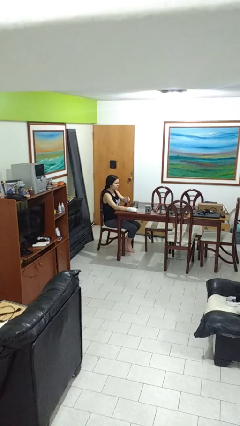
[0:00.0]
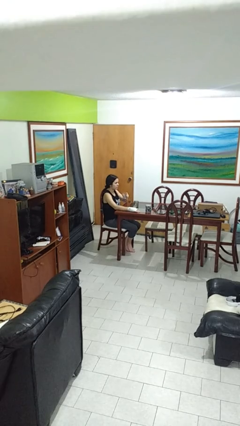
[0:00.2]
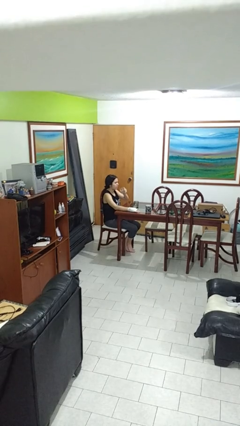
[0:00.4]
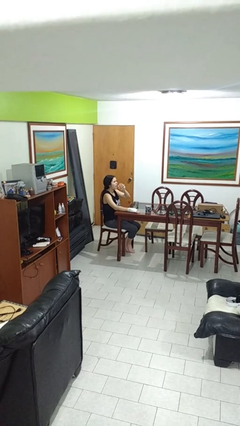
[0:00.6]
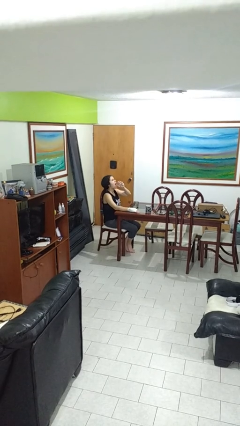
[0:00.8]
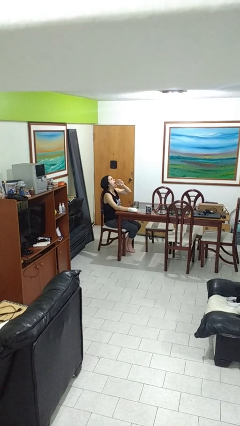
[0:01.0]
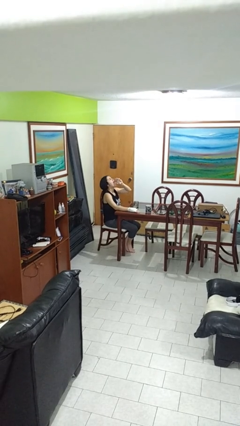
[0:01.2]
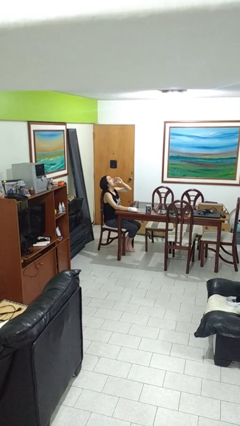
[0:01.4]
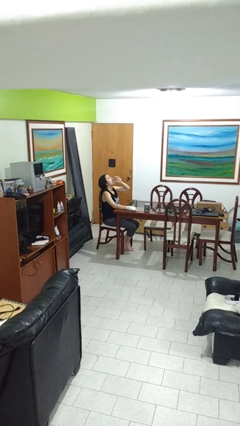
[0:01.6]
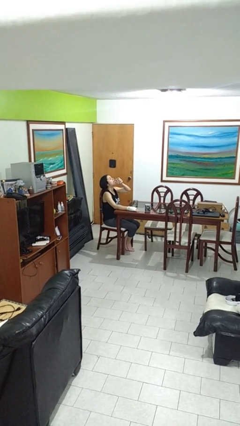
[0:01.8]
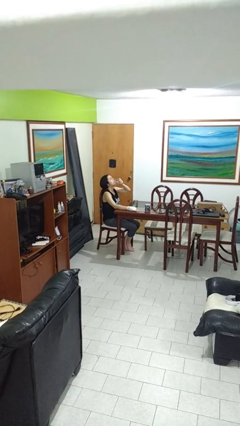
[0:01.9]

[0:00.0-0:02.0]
person drinks from shotglass

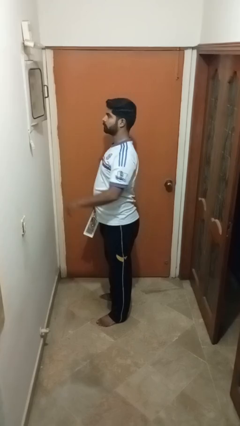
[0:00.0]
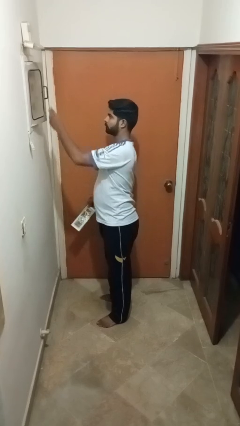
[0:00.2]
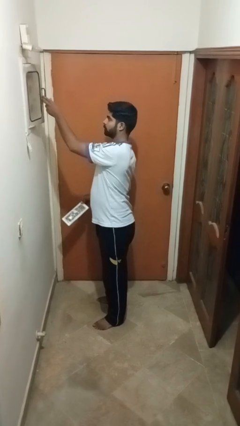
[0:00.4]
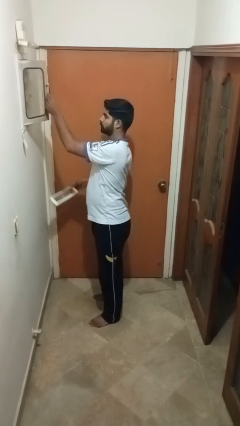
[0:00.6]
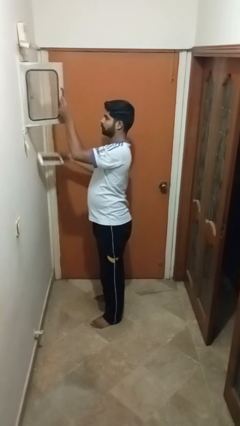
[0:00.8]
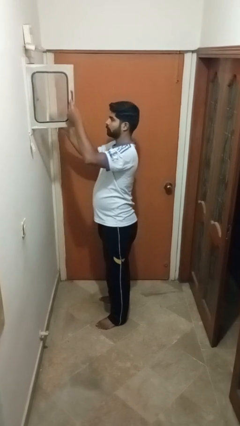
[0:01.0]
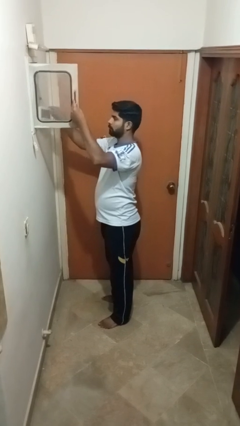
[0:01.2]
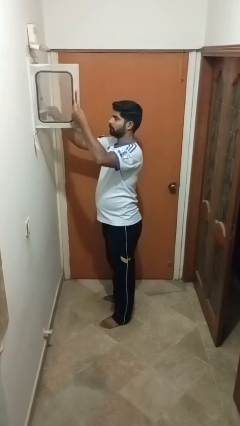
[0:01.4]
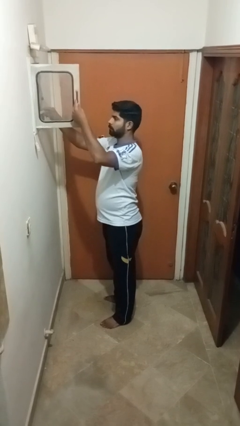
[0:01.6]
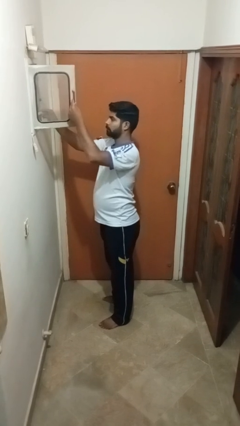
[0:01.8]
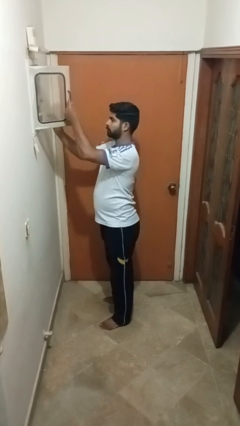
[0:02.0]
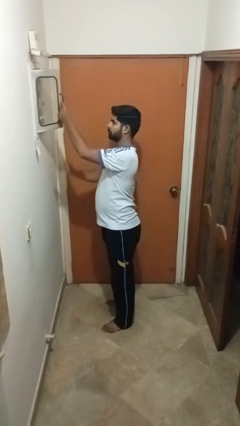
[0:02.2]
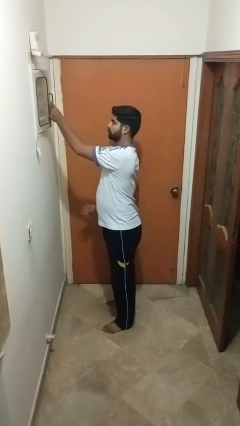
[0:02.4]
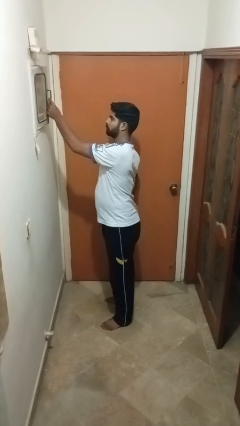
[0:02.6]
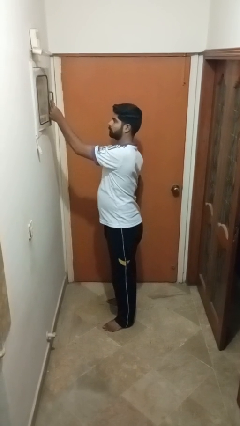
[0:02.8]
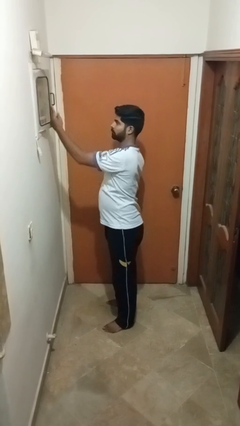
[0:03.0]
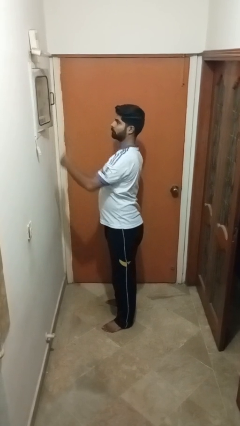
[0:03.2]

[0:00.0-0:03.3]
person puts letters in mailbox

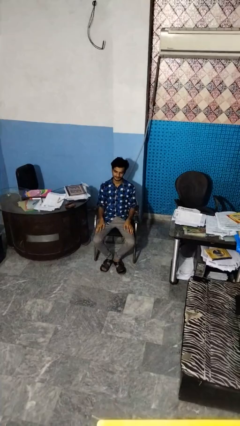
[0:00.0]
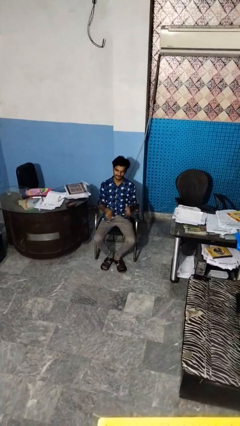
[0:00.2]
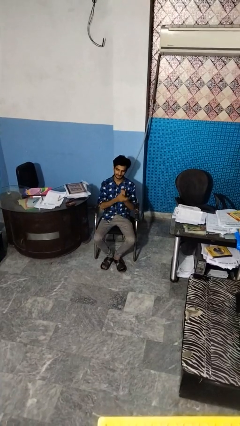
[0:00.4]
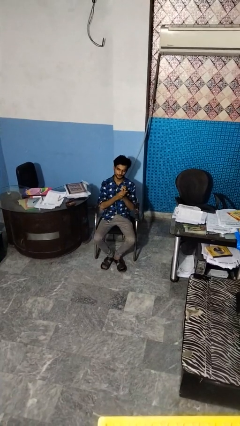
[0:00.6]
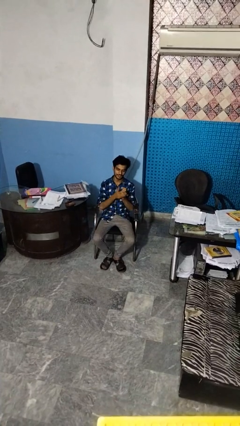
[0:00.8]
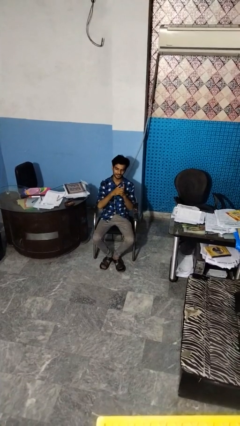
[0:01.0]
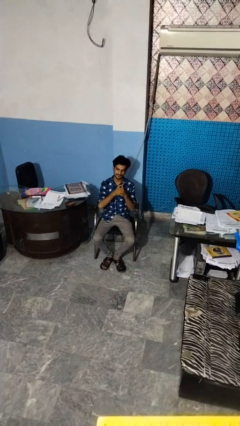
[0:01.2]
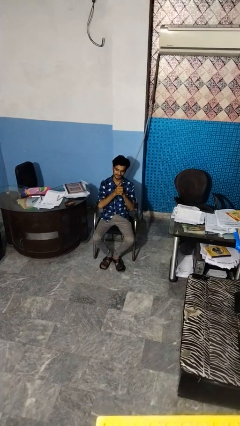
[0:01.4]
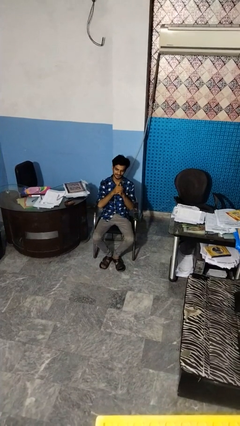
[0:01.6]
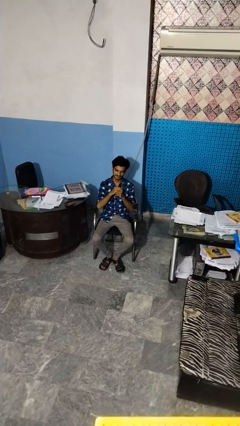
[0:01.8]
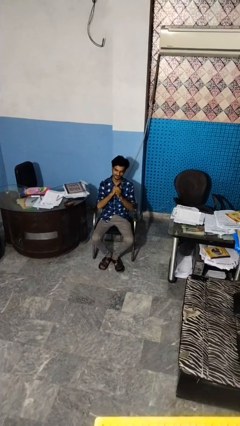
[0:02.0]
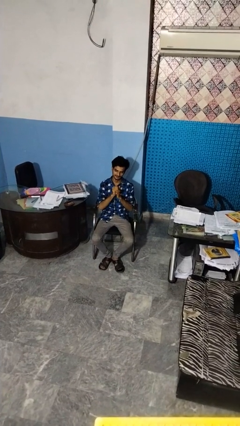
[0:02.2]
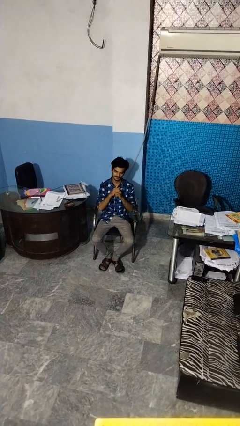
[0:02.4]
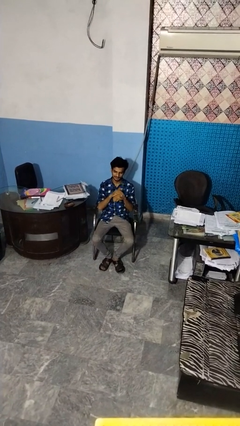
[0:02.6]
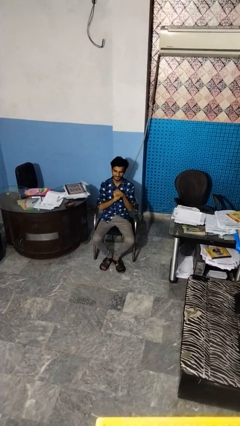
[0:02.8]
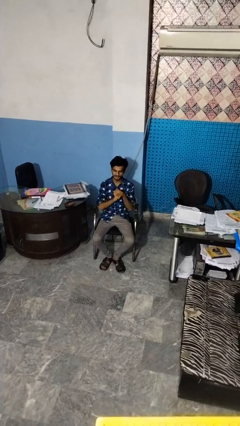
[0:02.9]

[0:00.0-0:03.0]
person cracks knuckles

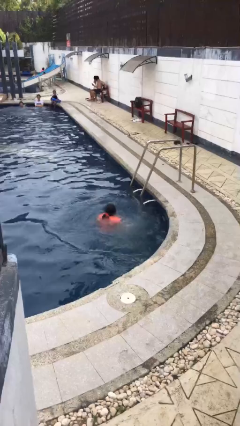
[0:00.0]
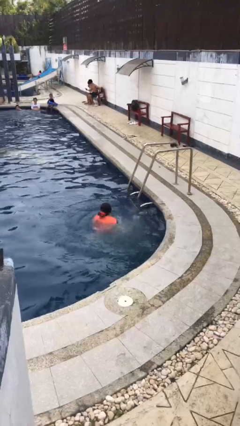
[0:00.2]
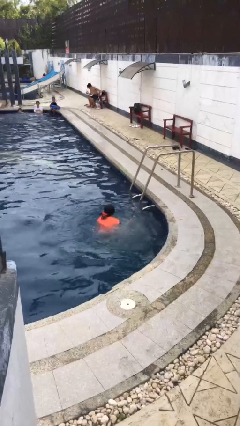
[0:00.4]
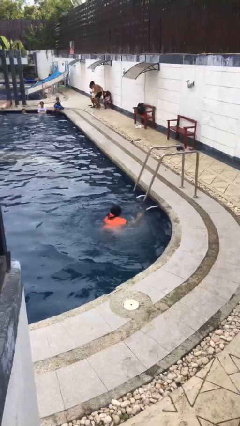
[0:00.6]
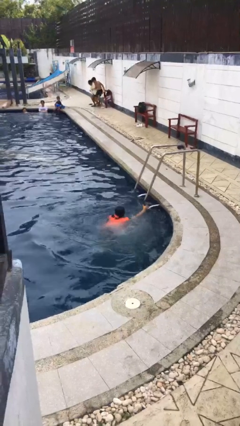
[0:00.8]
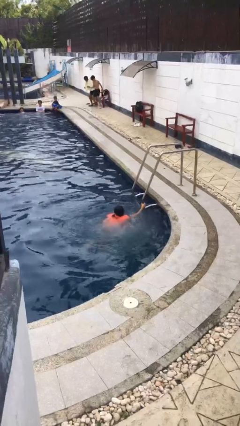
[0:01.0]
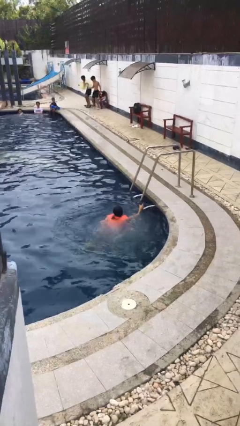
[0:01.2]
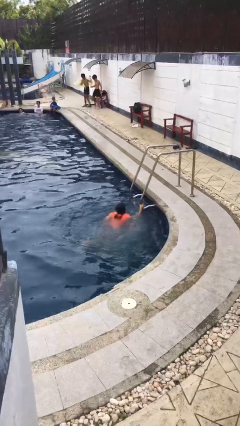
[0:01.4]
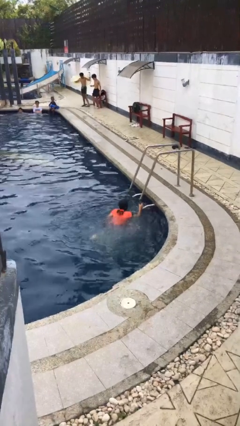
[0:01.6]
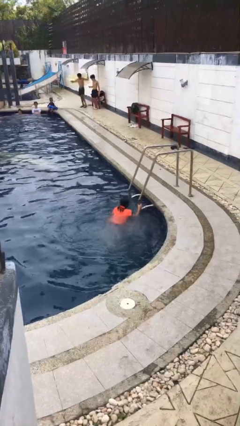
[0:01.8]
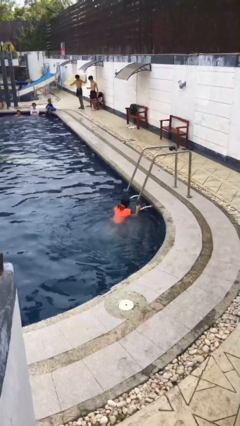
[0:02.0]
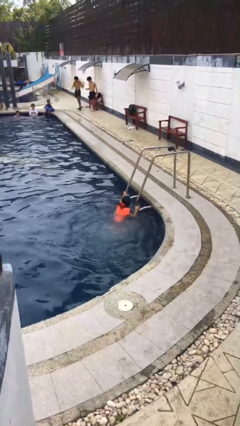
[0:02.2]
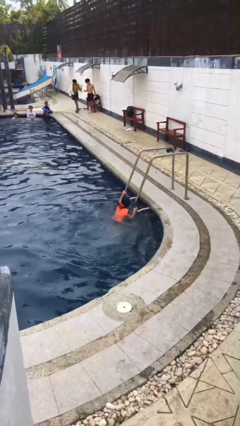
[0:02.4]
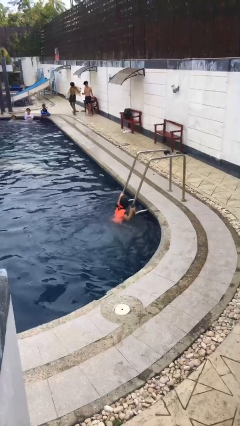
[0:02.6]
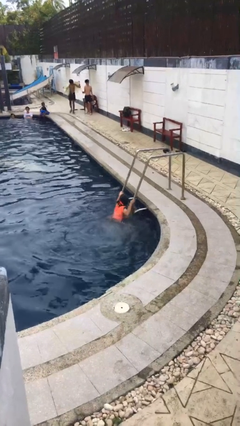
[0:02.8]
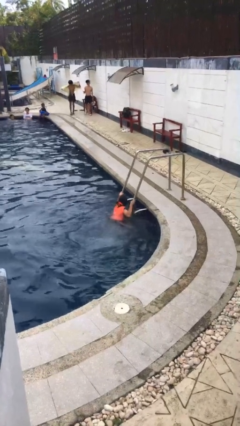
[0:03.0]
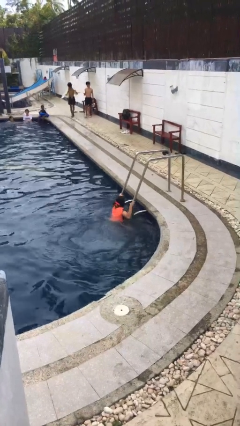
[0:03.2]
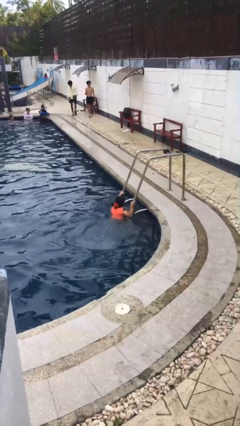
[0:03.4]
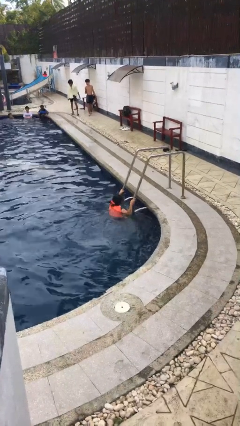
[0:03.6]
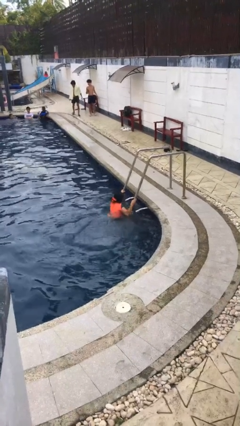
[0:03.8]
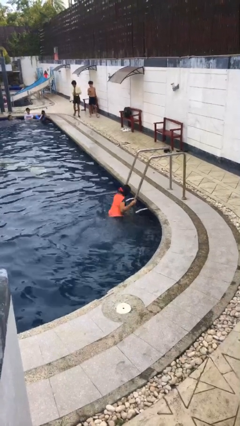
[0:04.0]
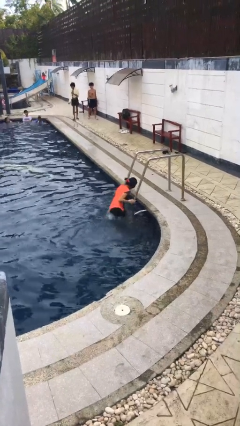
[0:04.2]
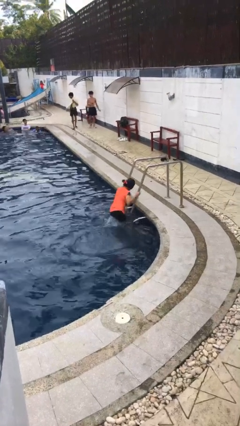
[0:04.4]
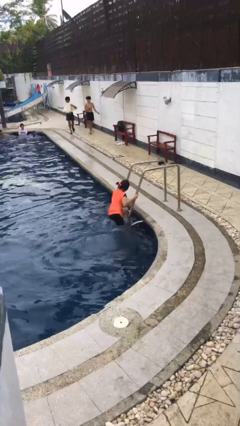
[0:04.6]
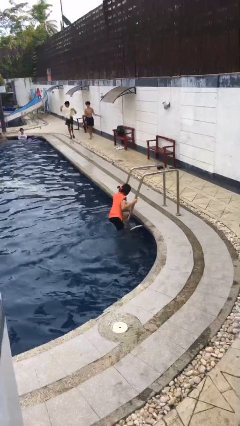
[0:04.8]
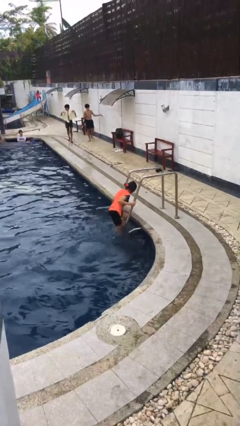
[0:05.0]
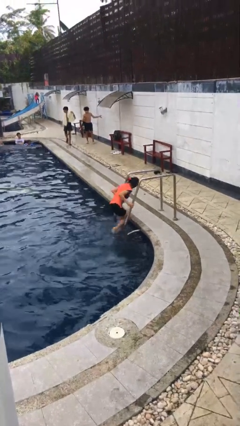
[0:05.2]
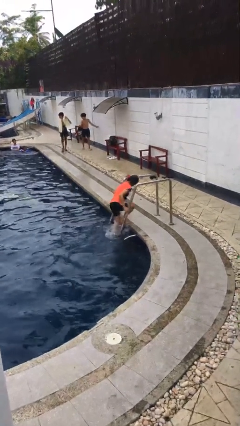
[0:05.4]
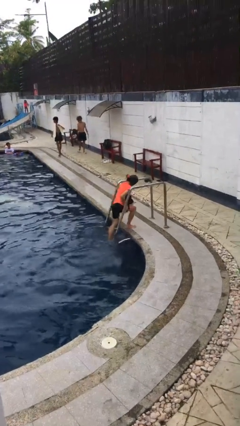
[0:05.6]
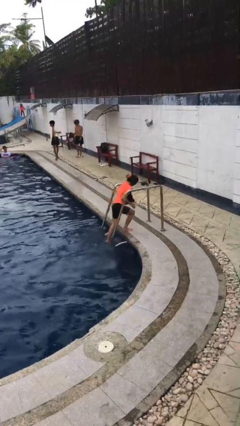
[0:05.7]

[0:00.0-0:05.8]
person exits pool

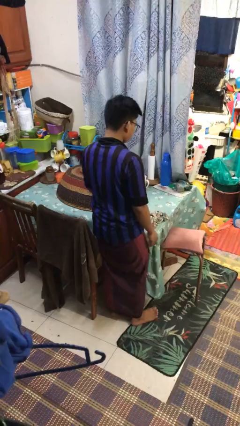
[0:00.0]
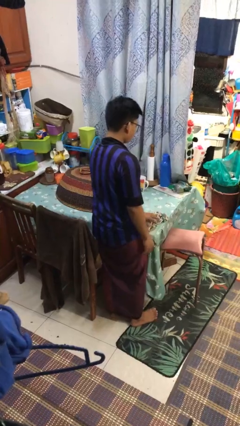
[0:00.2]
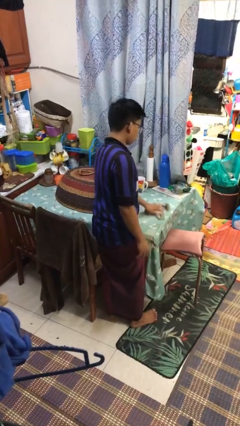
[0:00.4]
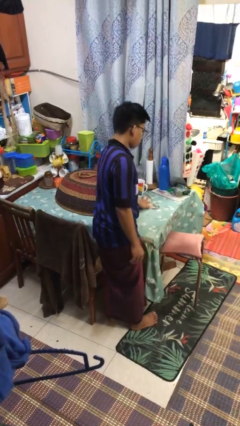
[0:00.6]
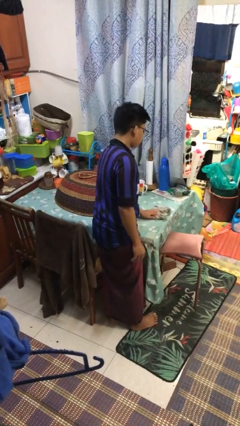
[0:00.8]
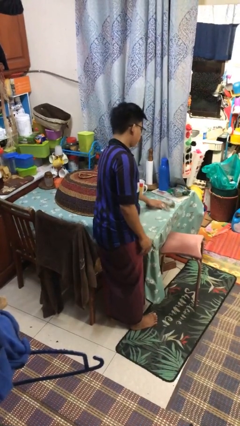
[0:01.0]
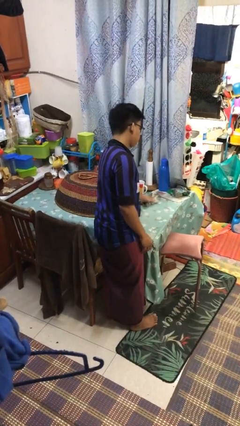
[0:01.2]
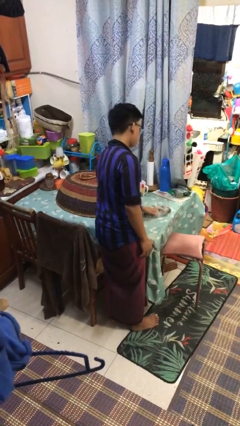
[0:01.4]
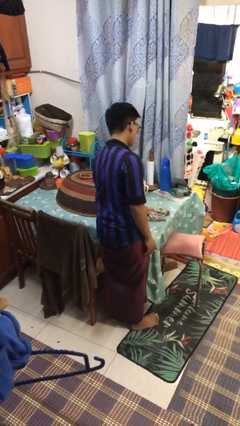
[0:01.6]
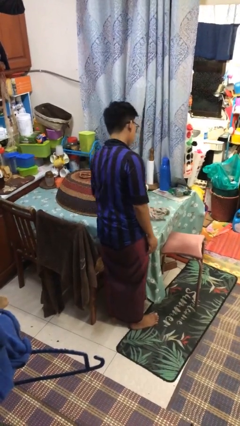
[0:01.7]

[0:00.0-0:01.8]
person cleans table with rag

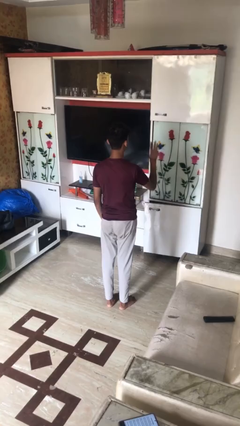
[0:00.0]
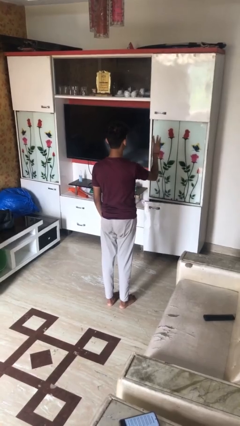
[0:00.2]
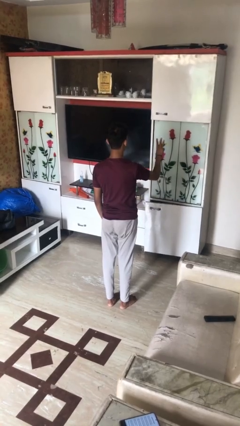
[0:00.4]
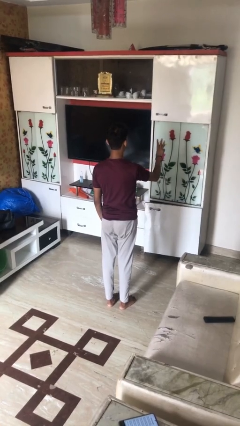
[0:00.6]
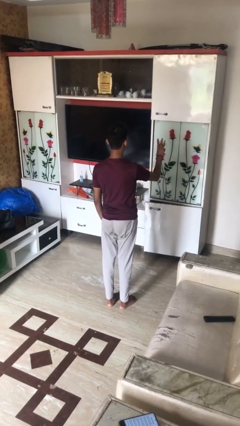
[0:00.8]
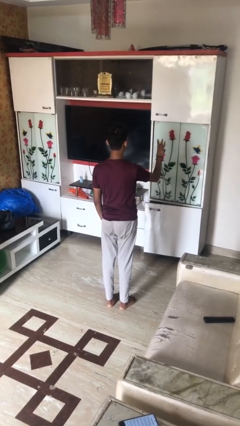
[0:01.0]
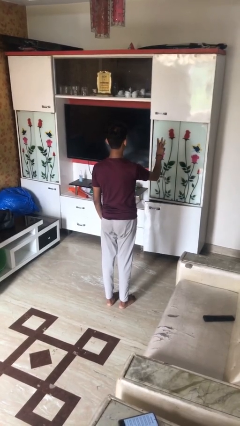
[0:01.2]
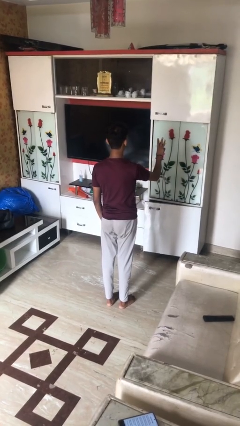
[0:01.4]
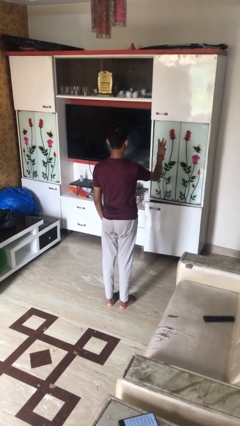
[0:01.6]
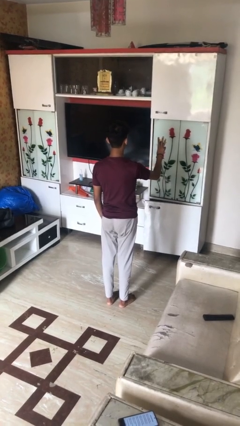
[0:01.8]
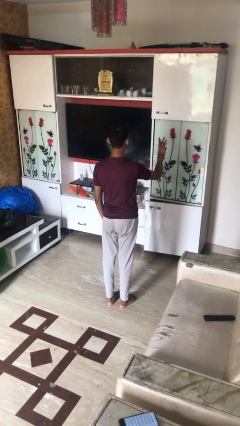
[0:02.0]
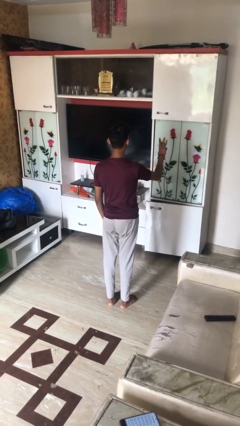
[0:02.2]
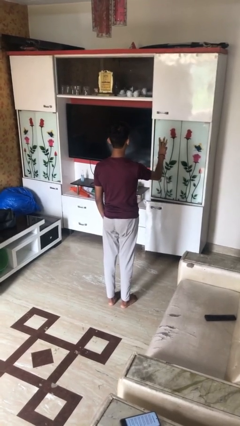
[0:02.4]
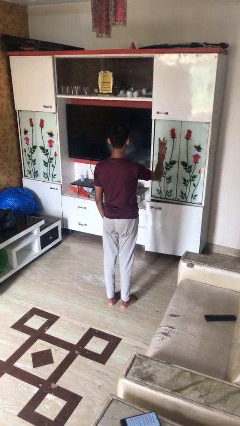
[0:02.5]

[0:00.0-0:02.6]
person gestures number three
